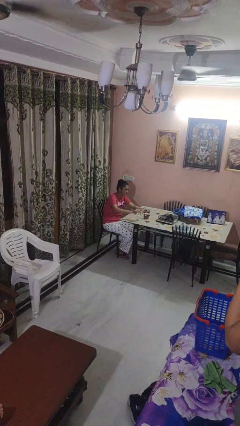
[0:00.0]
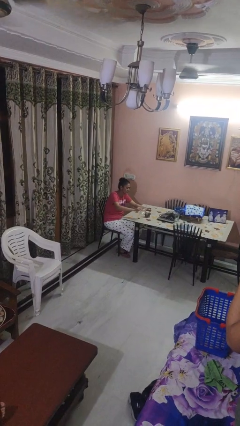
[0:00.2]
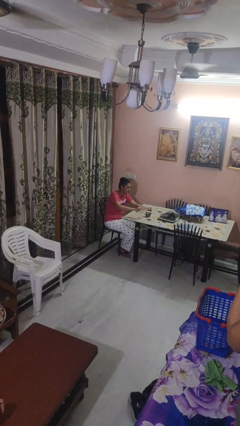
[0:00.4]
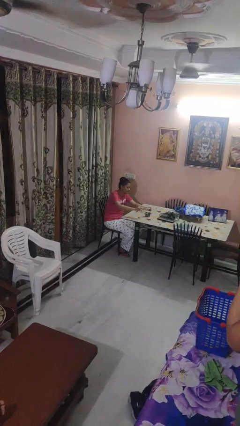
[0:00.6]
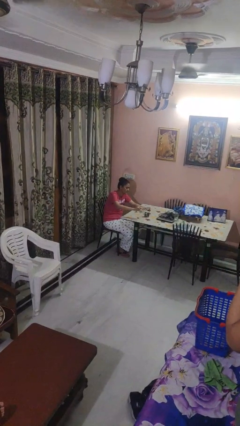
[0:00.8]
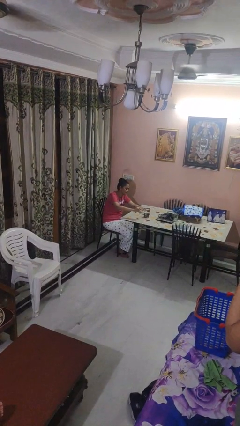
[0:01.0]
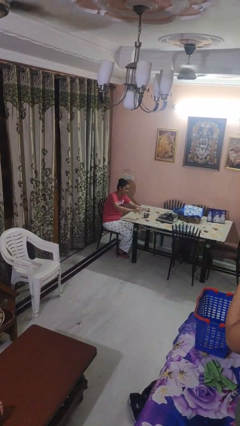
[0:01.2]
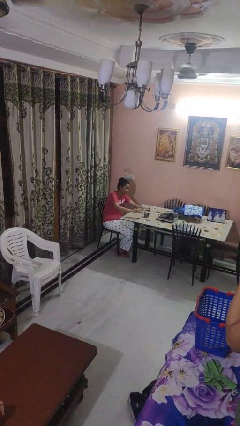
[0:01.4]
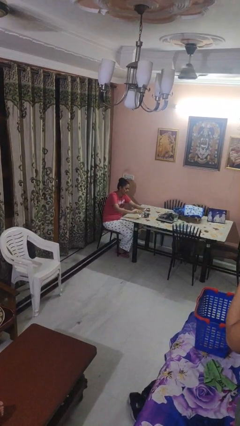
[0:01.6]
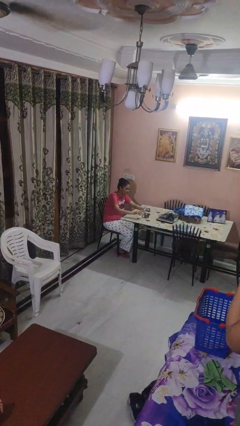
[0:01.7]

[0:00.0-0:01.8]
person pours liquid into cup

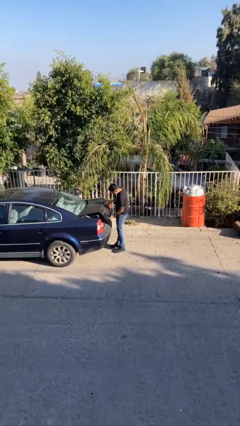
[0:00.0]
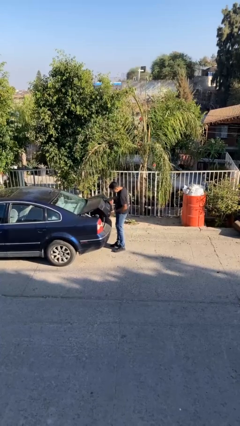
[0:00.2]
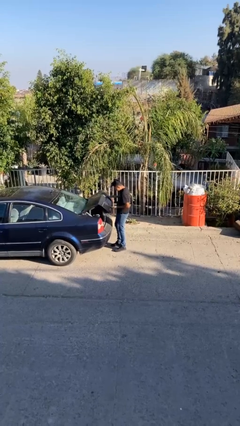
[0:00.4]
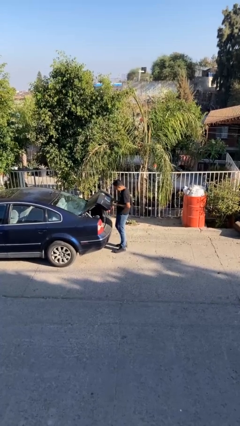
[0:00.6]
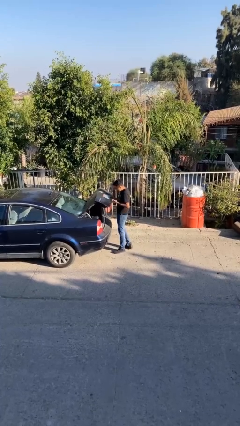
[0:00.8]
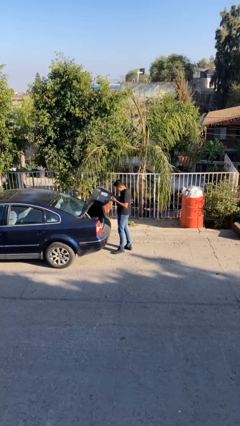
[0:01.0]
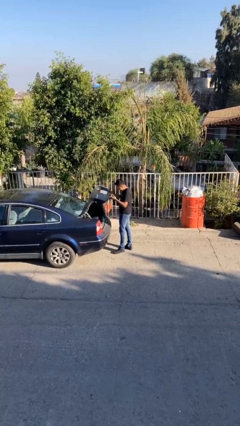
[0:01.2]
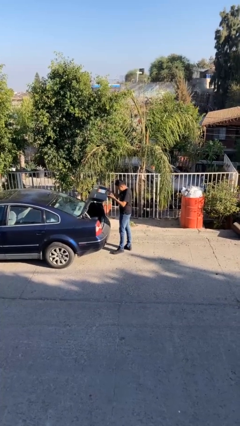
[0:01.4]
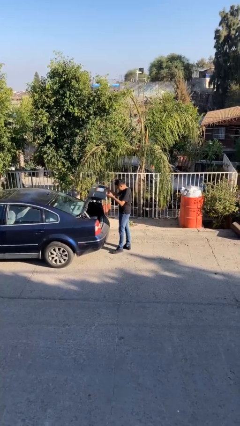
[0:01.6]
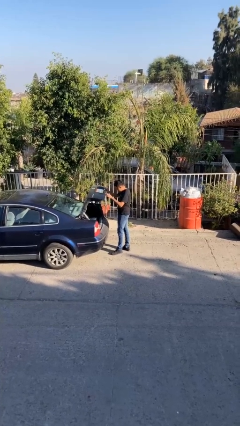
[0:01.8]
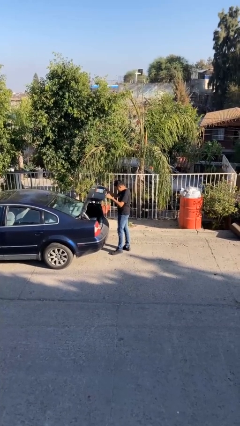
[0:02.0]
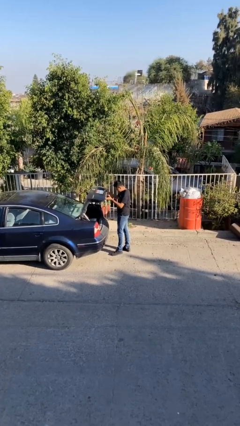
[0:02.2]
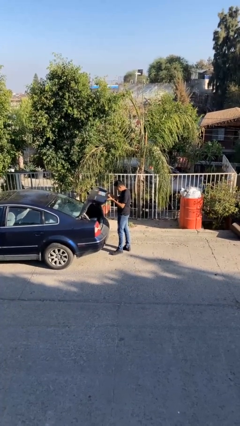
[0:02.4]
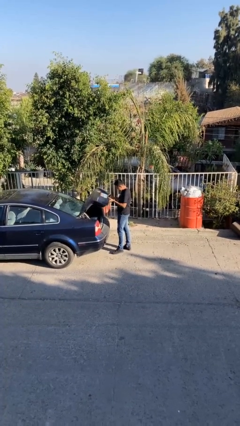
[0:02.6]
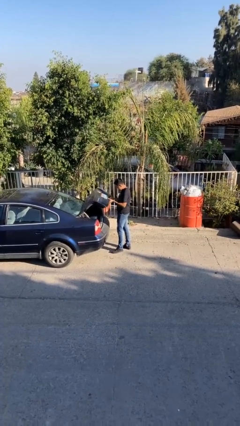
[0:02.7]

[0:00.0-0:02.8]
person opens car trunk

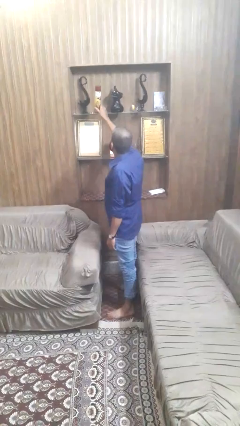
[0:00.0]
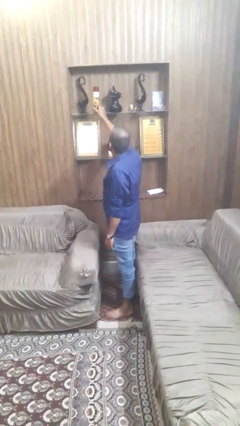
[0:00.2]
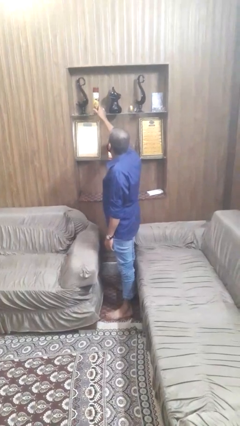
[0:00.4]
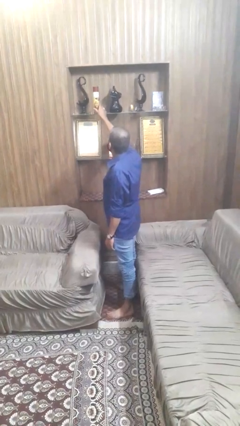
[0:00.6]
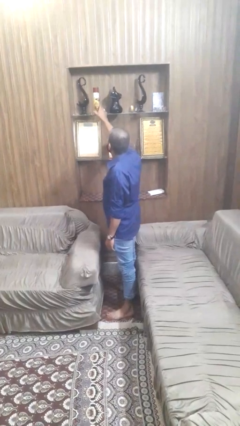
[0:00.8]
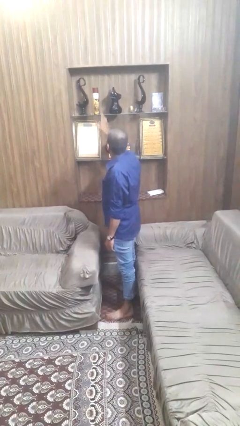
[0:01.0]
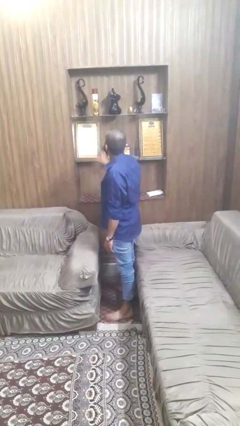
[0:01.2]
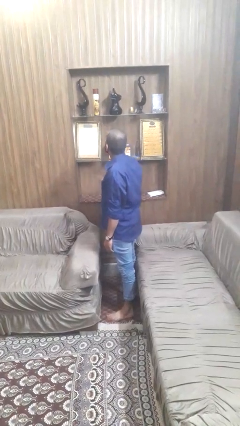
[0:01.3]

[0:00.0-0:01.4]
person puts down object on shelf

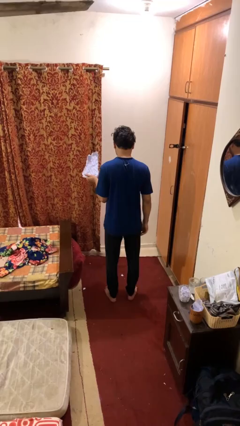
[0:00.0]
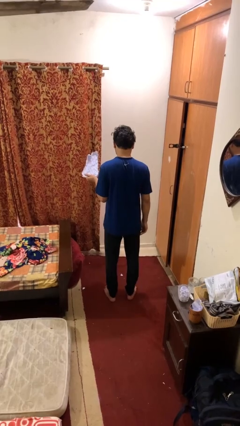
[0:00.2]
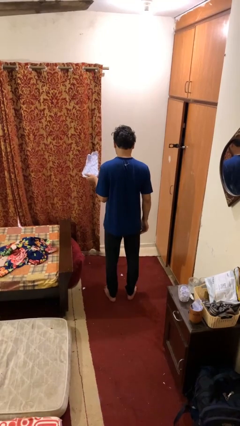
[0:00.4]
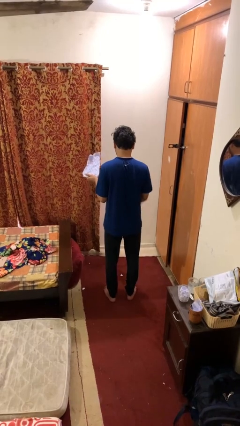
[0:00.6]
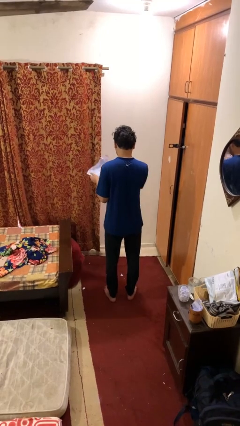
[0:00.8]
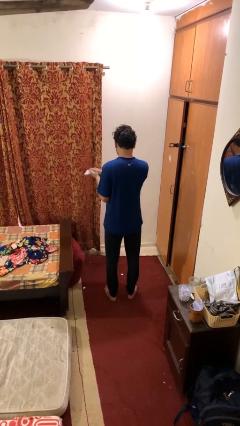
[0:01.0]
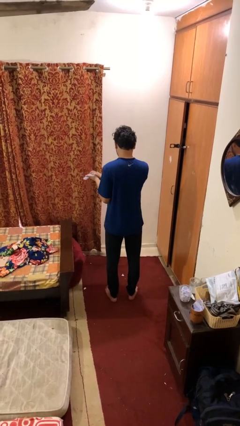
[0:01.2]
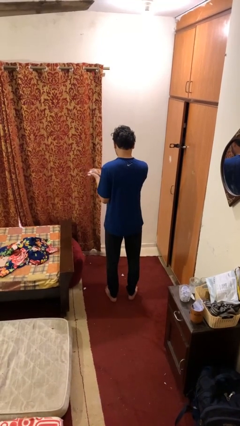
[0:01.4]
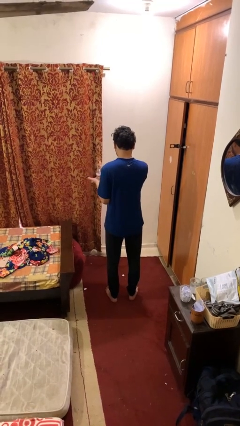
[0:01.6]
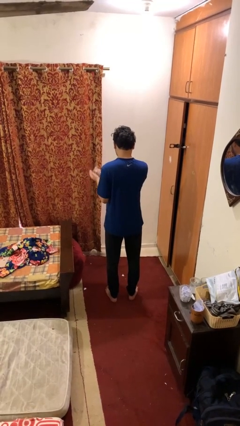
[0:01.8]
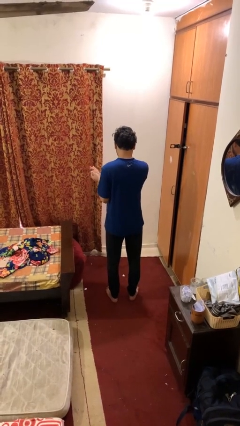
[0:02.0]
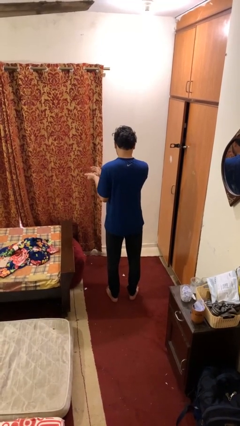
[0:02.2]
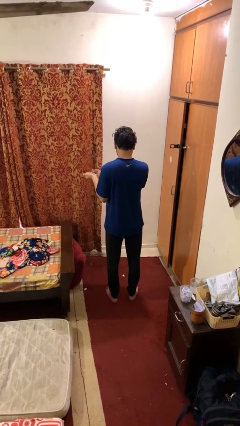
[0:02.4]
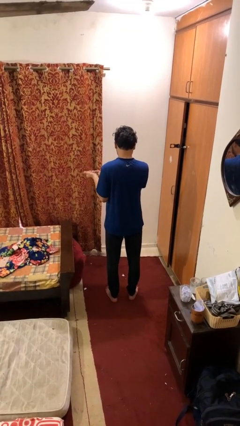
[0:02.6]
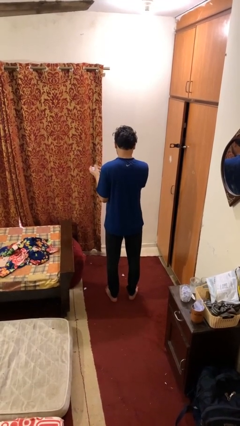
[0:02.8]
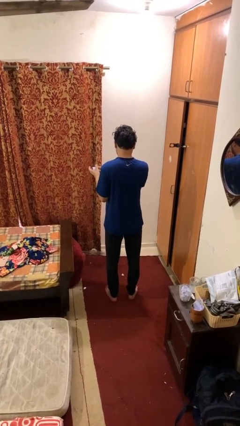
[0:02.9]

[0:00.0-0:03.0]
person crumples paper

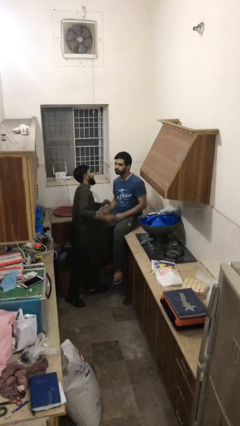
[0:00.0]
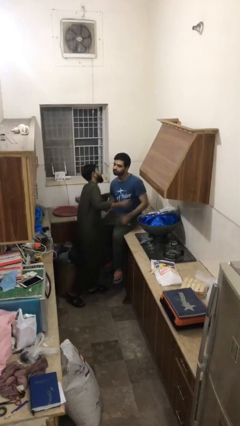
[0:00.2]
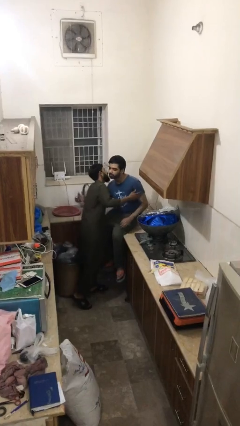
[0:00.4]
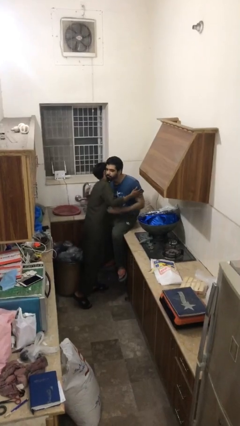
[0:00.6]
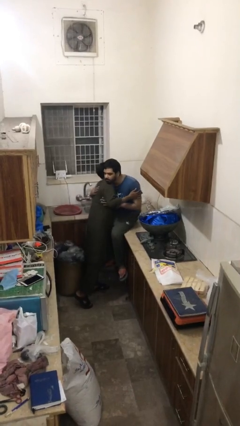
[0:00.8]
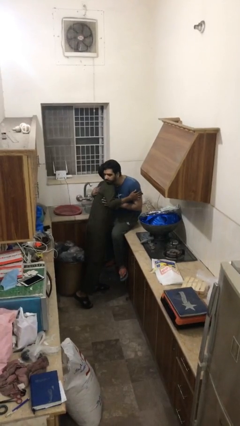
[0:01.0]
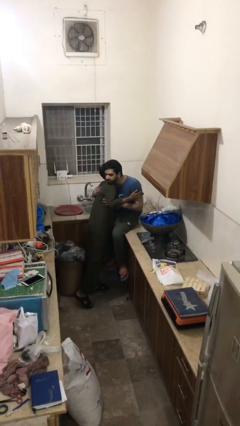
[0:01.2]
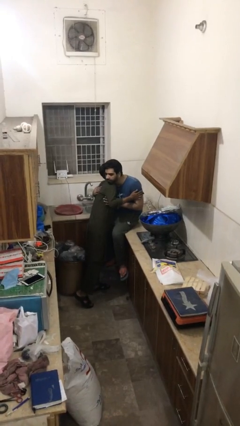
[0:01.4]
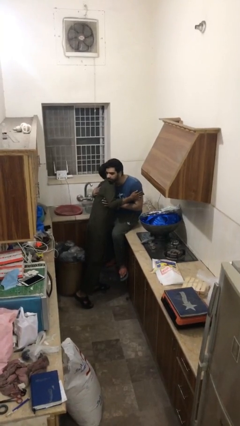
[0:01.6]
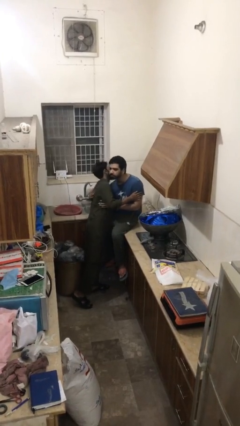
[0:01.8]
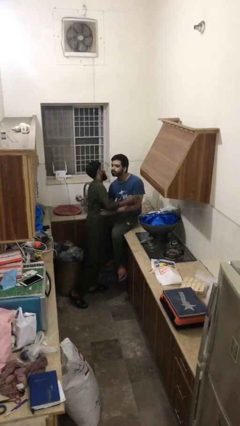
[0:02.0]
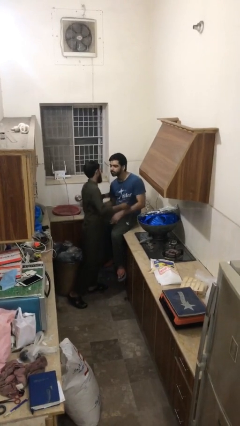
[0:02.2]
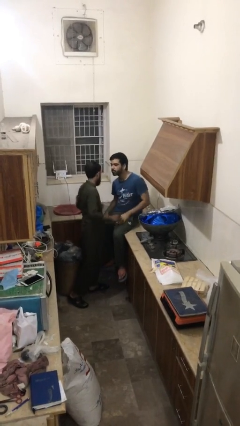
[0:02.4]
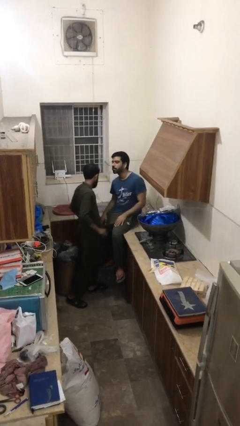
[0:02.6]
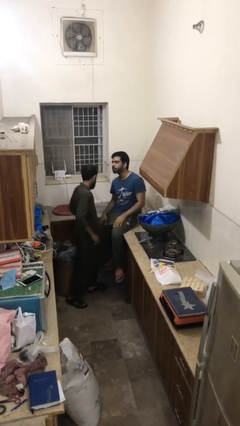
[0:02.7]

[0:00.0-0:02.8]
person embraces person

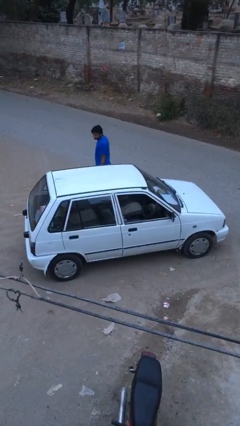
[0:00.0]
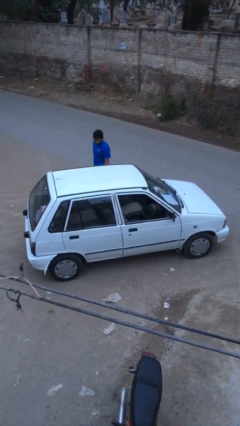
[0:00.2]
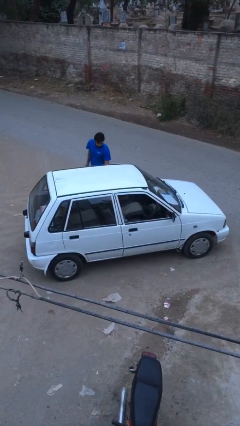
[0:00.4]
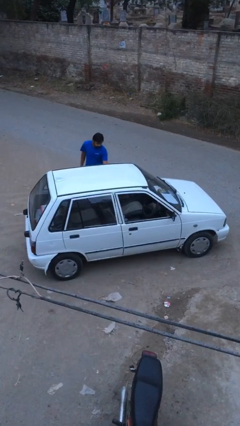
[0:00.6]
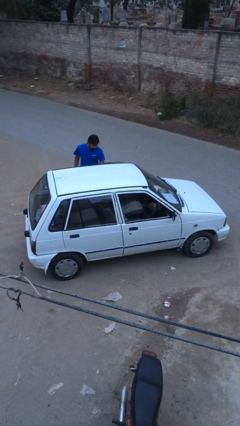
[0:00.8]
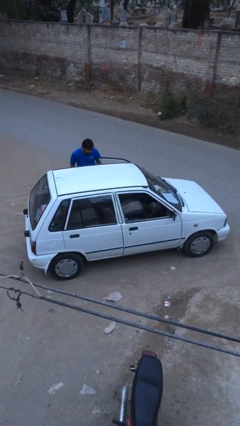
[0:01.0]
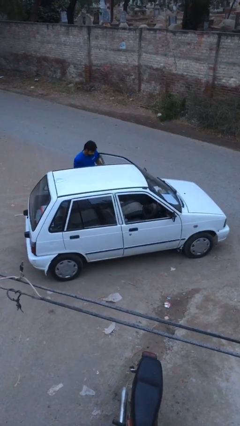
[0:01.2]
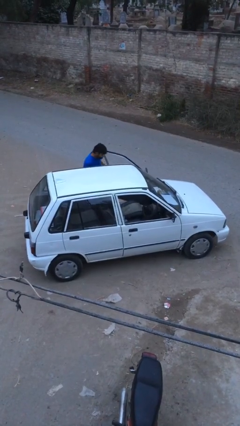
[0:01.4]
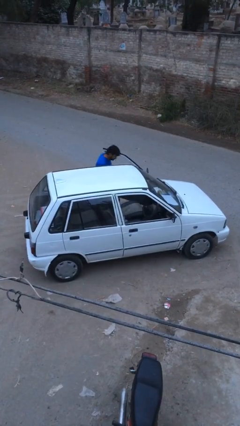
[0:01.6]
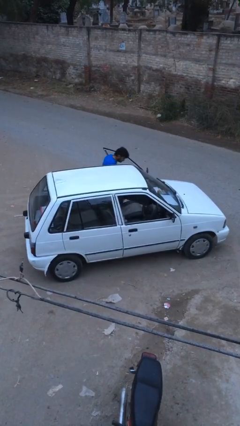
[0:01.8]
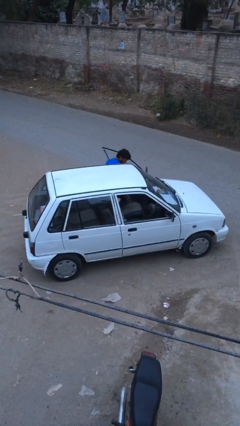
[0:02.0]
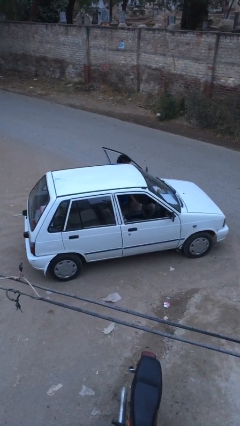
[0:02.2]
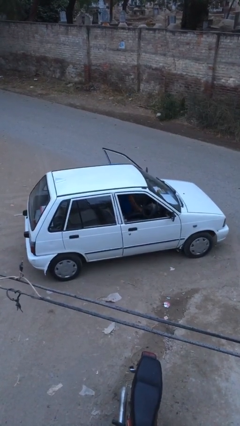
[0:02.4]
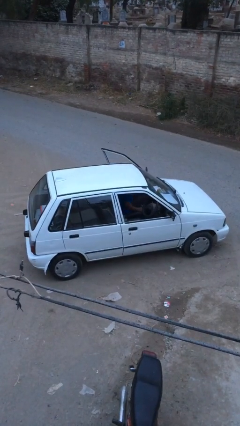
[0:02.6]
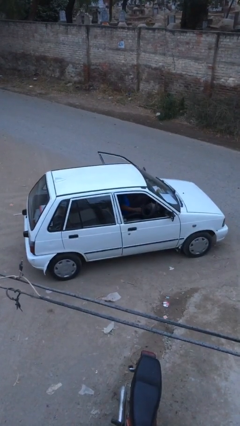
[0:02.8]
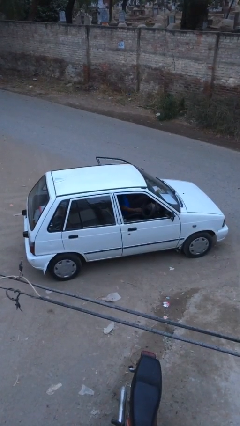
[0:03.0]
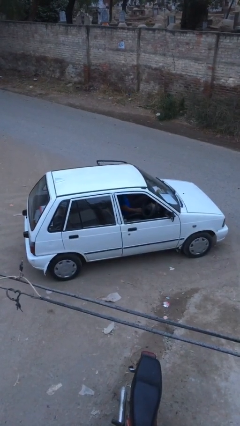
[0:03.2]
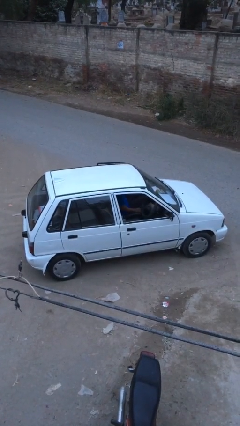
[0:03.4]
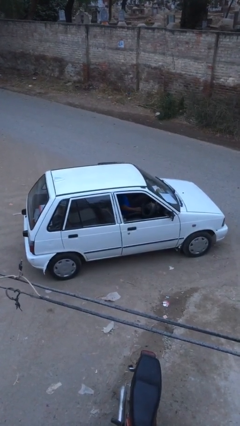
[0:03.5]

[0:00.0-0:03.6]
car picks up person

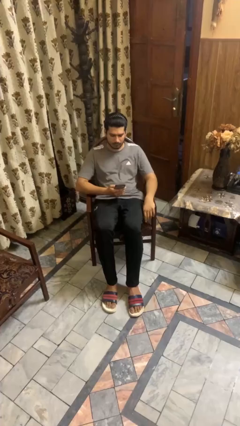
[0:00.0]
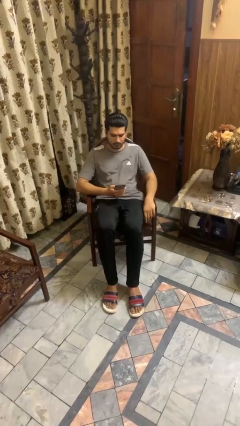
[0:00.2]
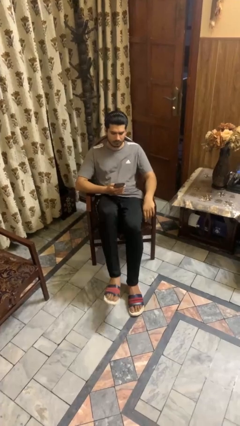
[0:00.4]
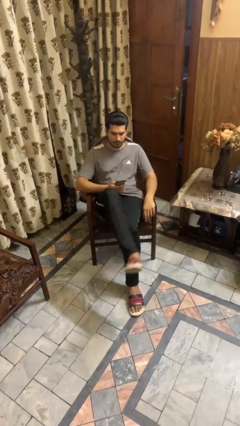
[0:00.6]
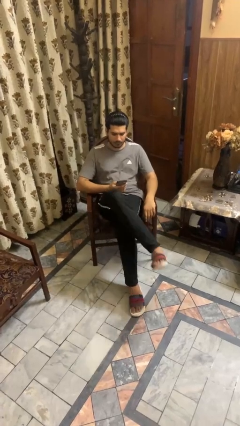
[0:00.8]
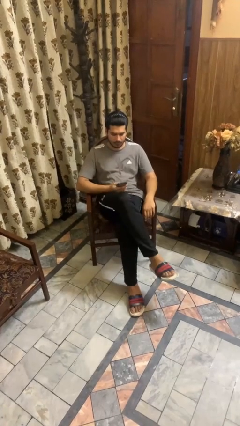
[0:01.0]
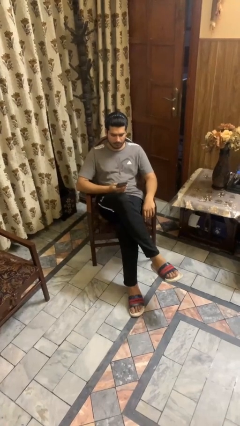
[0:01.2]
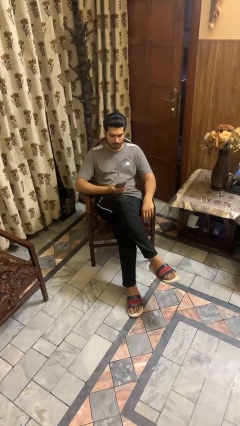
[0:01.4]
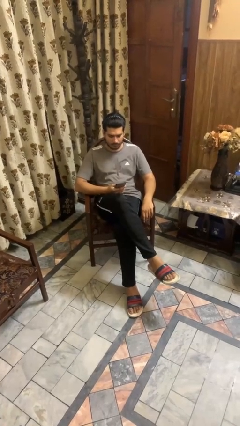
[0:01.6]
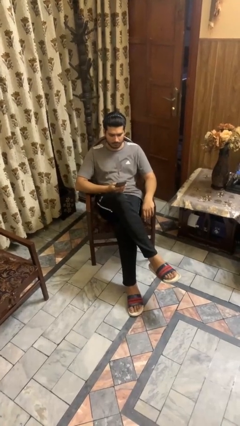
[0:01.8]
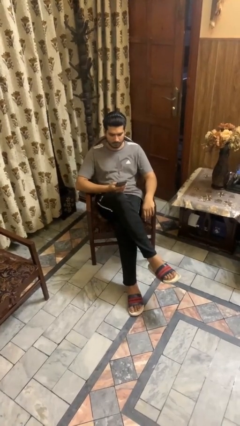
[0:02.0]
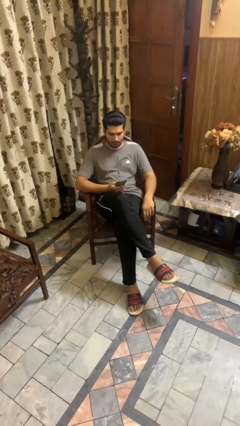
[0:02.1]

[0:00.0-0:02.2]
person crosses legs
